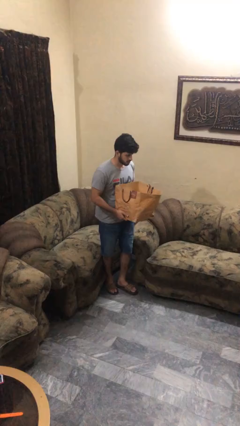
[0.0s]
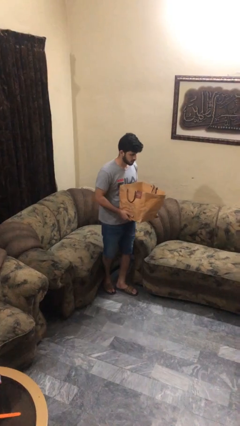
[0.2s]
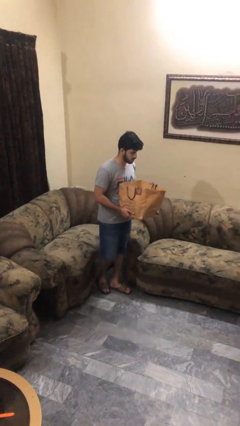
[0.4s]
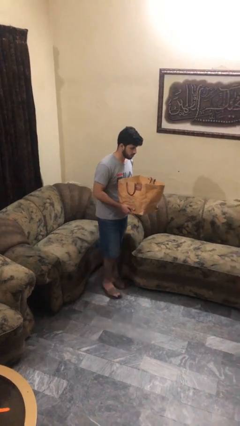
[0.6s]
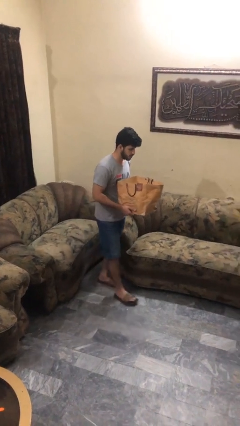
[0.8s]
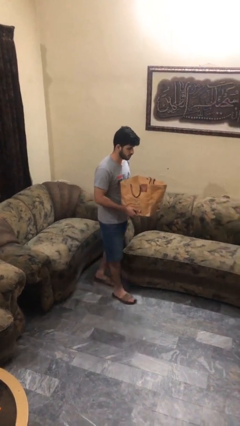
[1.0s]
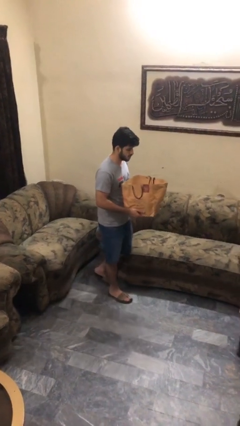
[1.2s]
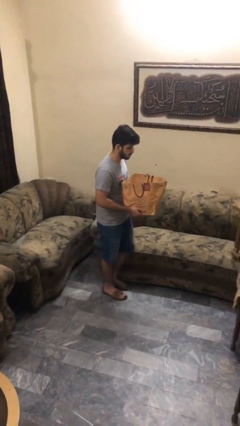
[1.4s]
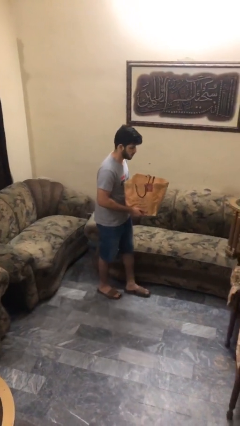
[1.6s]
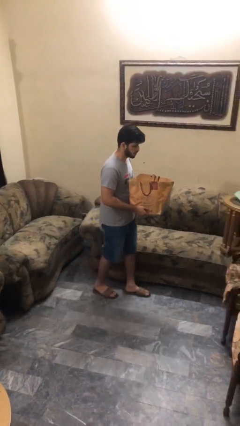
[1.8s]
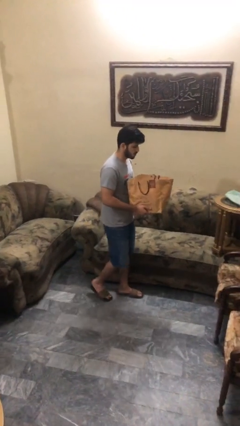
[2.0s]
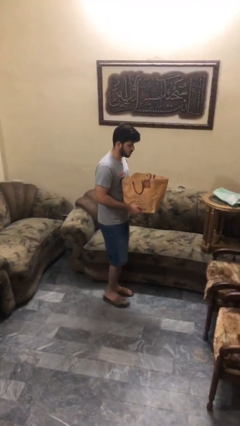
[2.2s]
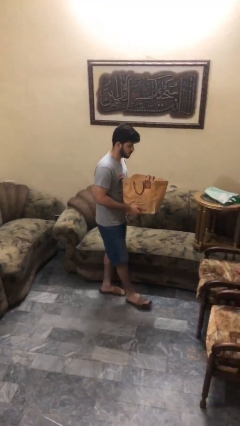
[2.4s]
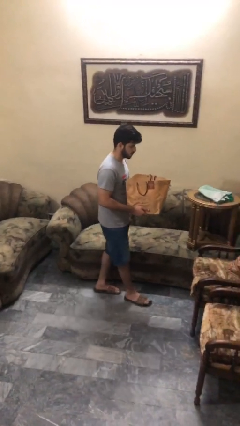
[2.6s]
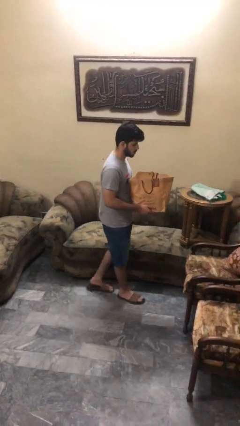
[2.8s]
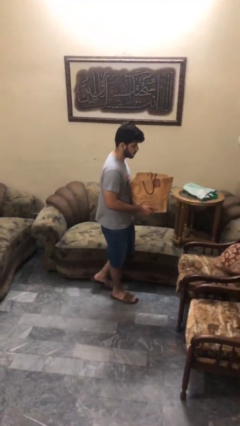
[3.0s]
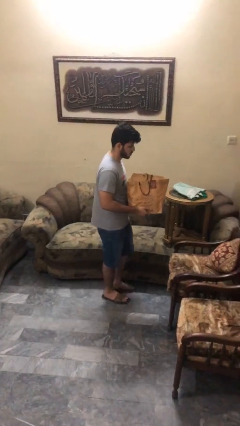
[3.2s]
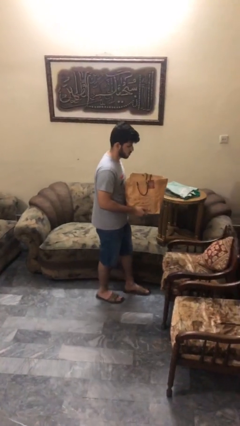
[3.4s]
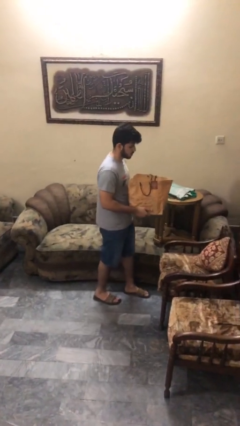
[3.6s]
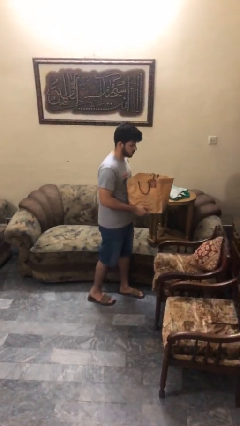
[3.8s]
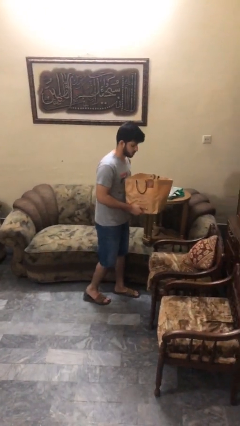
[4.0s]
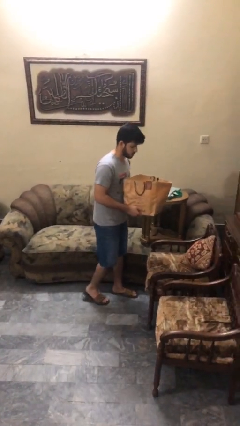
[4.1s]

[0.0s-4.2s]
person carries groceries

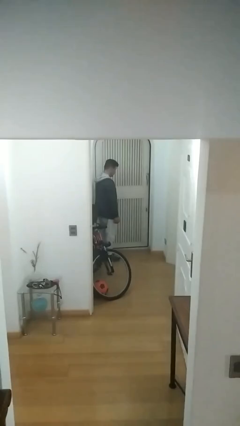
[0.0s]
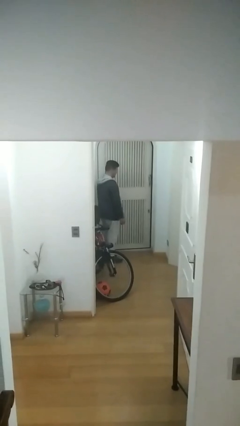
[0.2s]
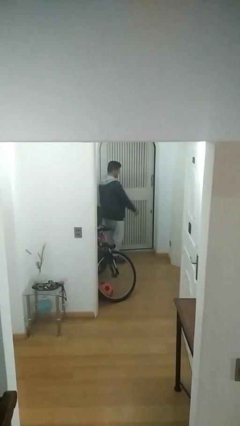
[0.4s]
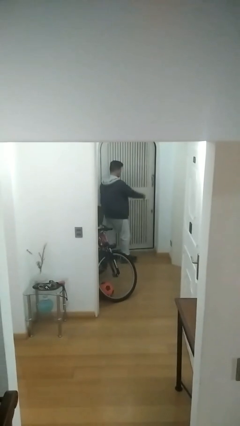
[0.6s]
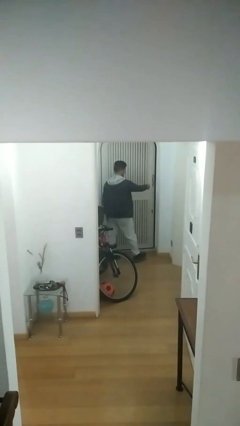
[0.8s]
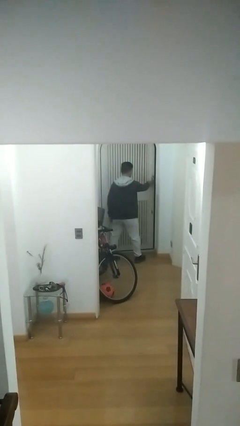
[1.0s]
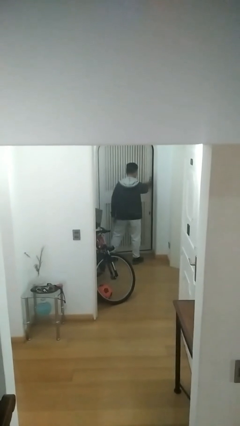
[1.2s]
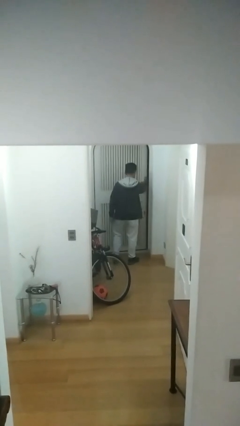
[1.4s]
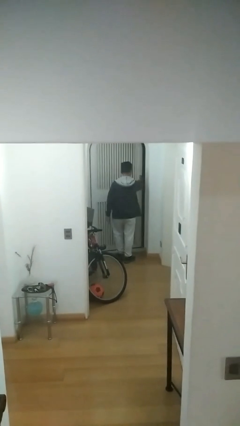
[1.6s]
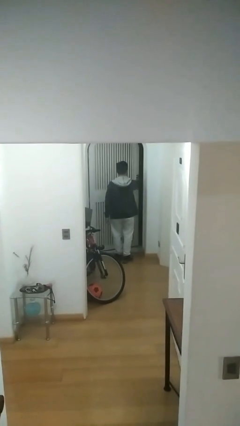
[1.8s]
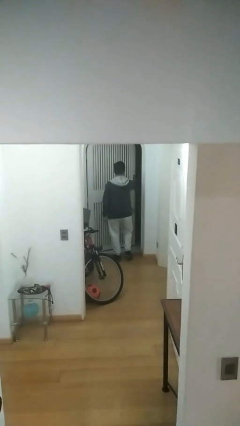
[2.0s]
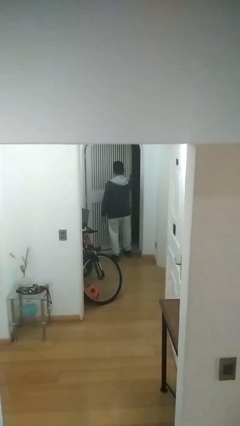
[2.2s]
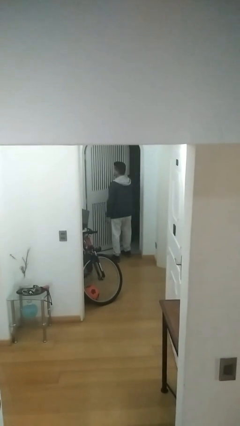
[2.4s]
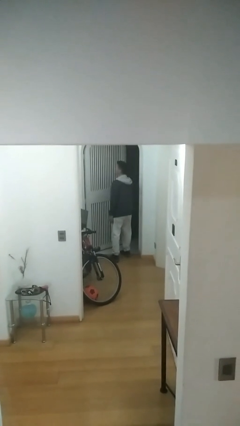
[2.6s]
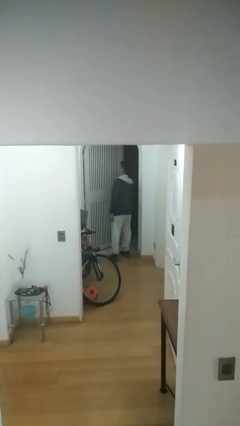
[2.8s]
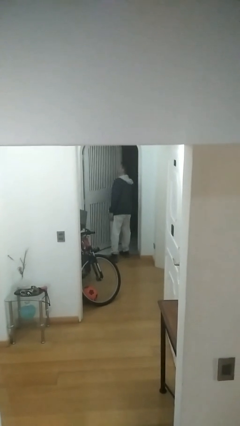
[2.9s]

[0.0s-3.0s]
person opens facility door

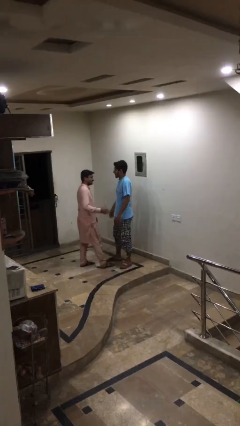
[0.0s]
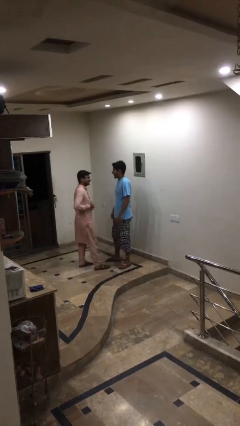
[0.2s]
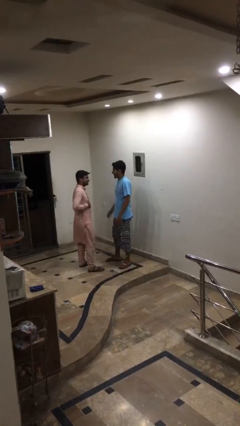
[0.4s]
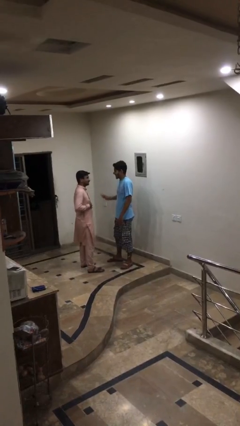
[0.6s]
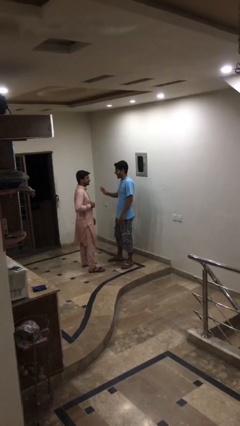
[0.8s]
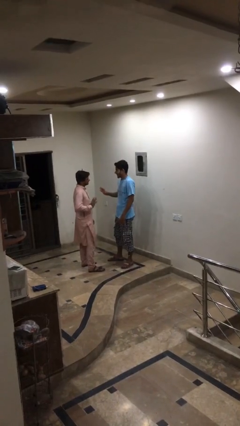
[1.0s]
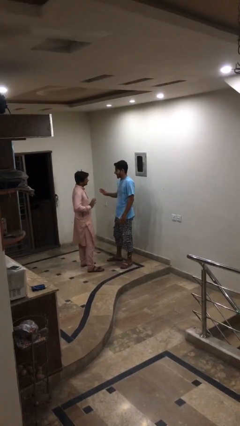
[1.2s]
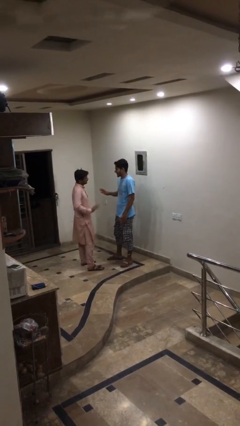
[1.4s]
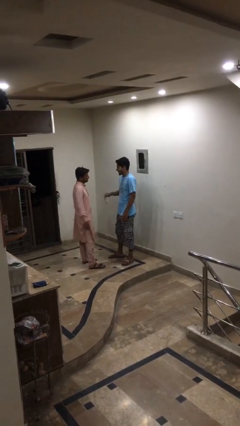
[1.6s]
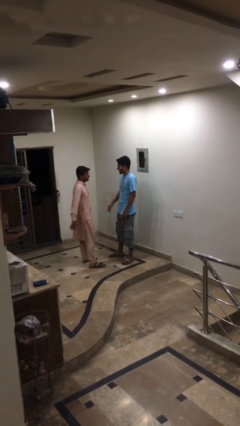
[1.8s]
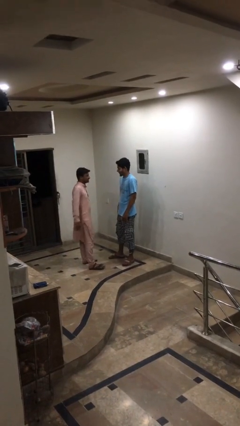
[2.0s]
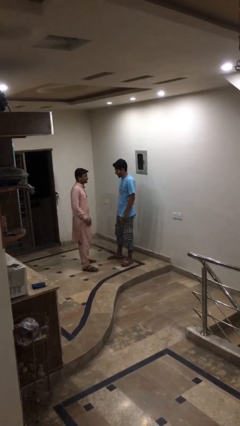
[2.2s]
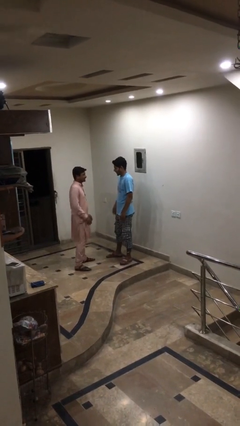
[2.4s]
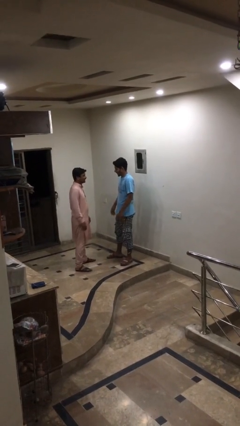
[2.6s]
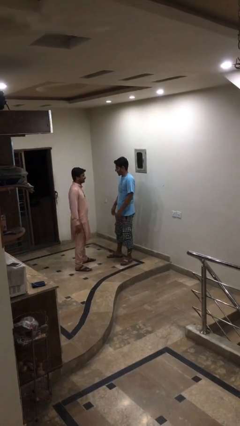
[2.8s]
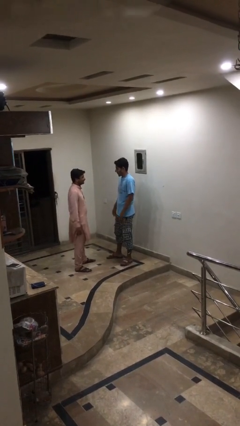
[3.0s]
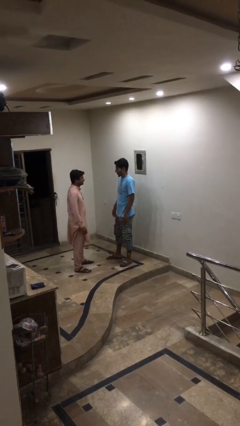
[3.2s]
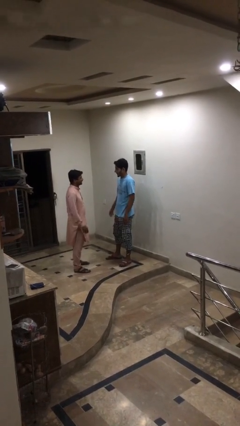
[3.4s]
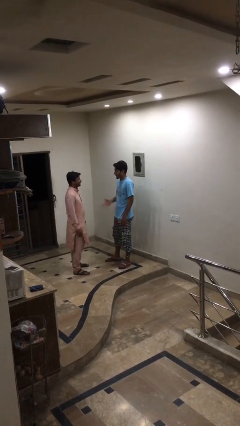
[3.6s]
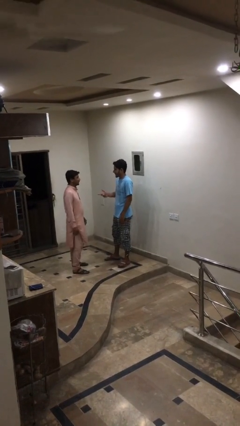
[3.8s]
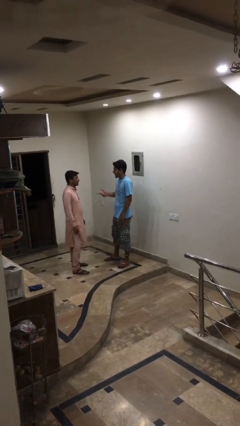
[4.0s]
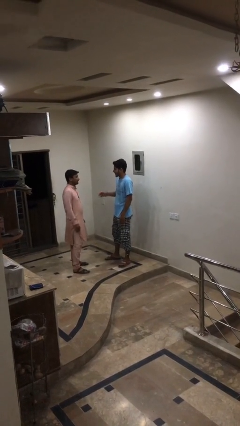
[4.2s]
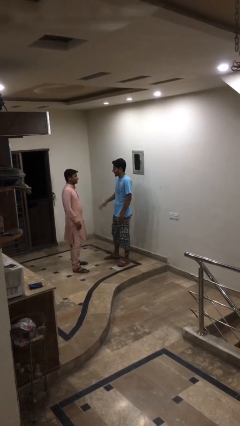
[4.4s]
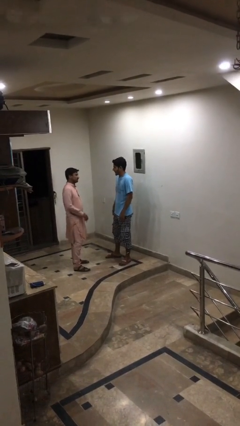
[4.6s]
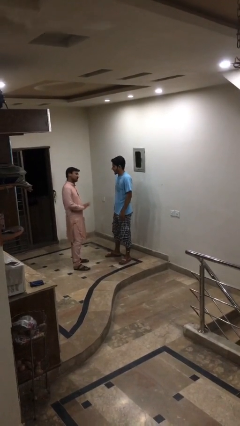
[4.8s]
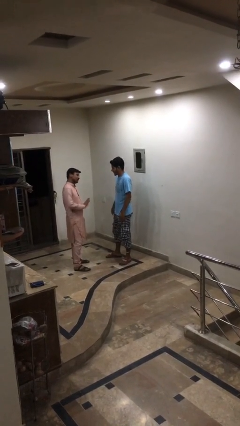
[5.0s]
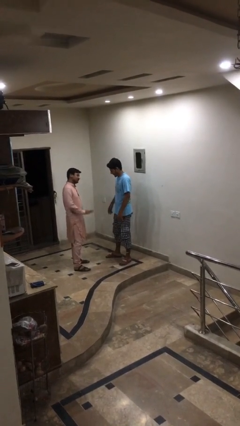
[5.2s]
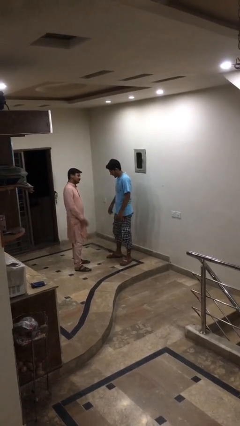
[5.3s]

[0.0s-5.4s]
person talks to person

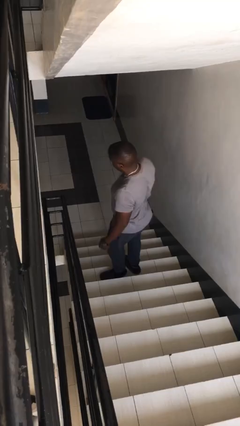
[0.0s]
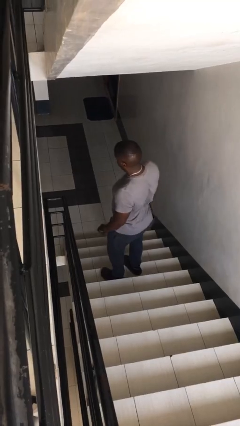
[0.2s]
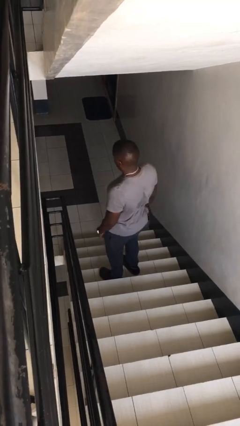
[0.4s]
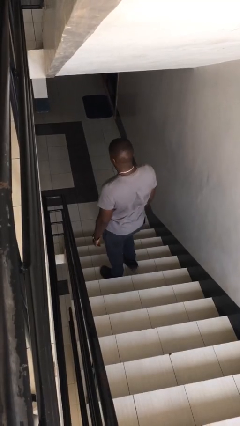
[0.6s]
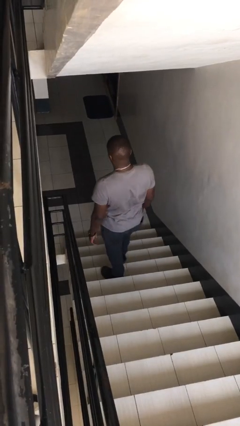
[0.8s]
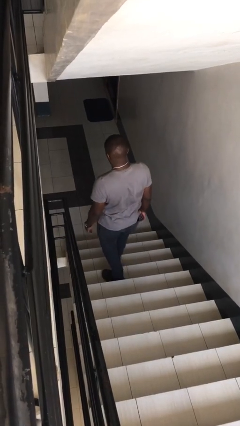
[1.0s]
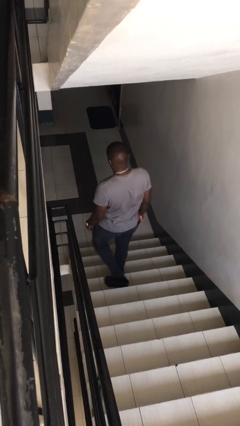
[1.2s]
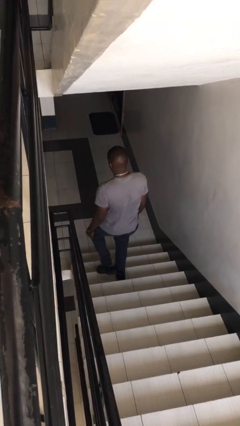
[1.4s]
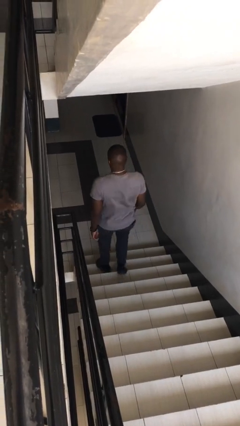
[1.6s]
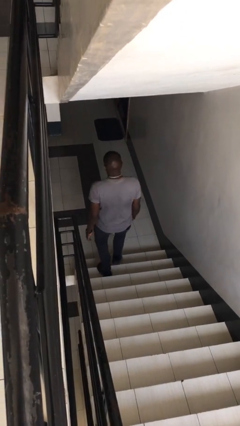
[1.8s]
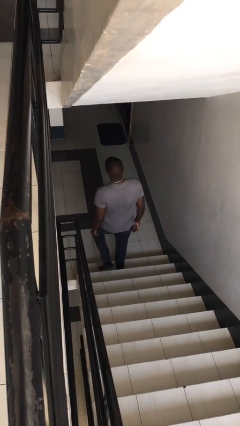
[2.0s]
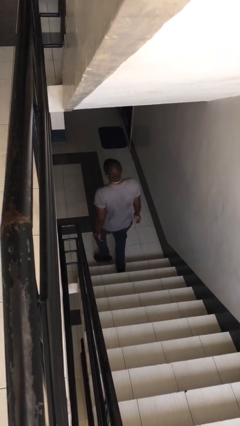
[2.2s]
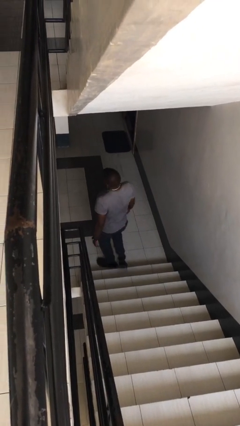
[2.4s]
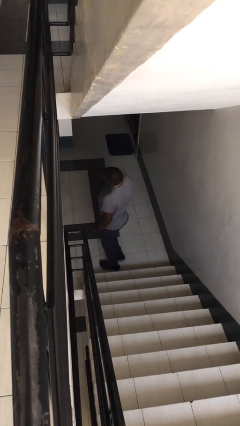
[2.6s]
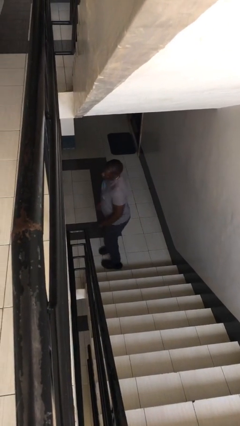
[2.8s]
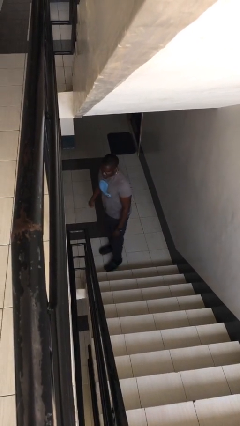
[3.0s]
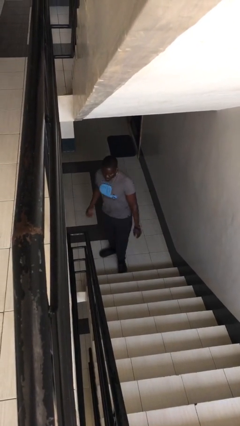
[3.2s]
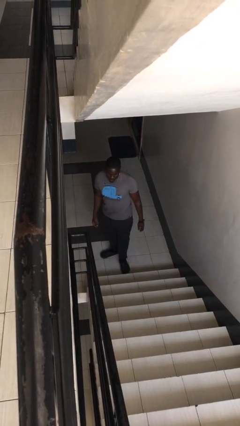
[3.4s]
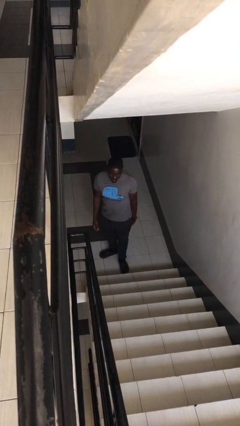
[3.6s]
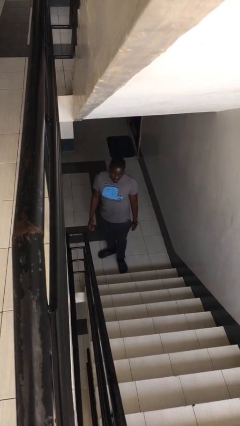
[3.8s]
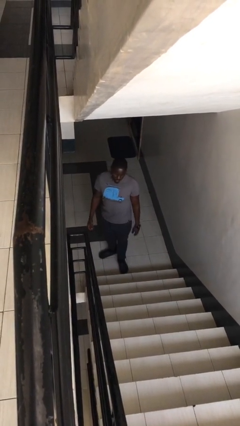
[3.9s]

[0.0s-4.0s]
person climbs down stairs

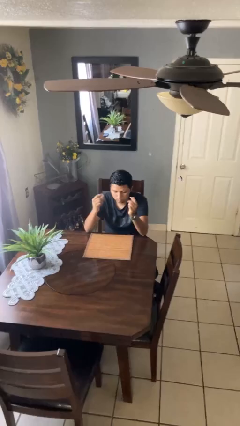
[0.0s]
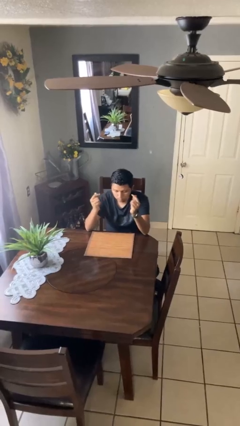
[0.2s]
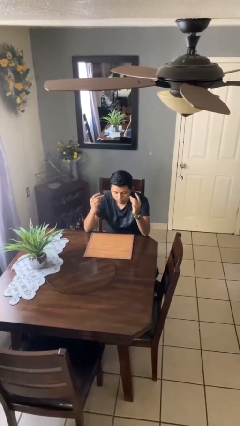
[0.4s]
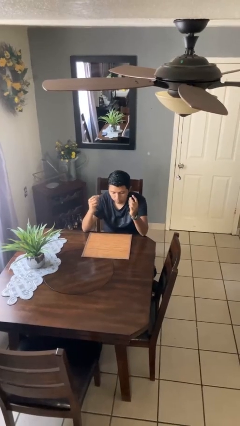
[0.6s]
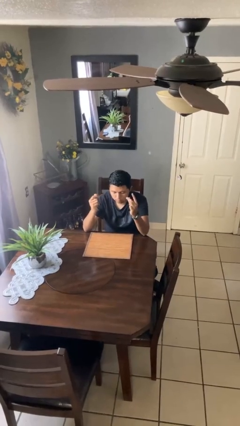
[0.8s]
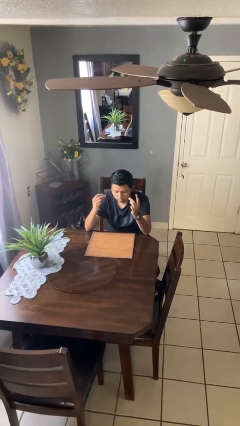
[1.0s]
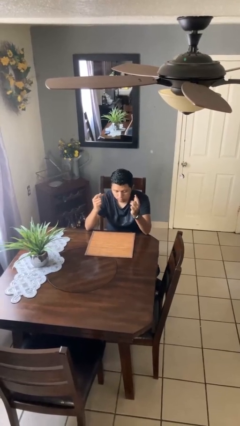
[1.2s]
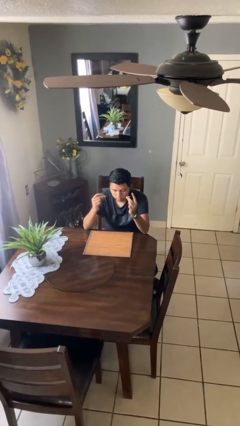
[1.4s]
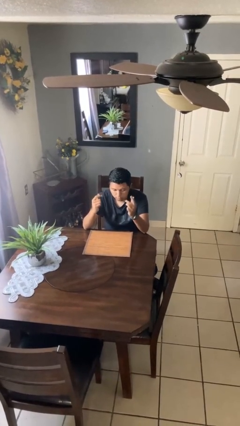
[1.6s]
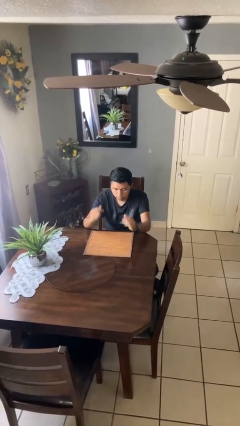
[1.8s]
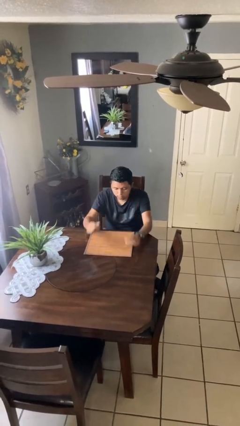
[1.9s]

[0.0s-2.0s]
person snaps fingers
